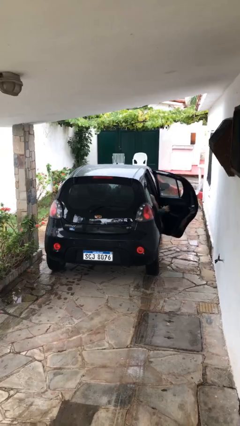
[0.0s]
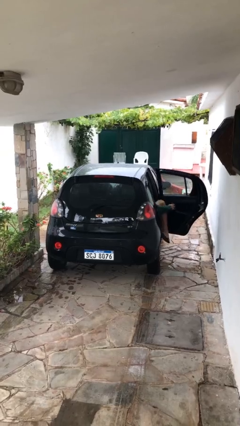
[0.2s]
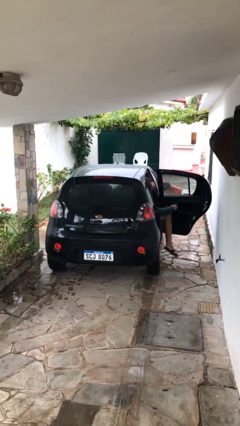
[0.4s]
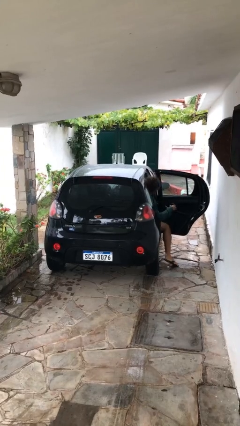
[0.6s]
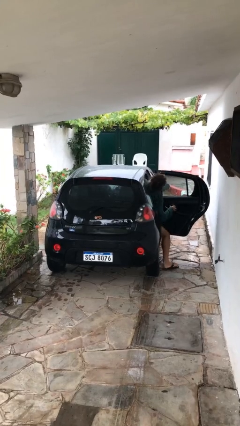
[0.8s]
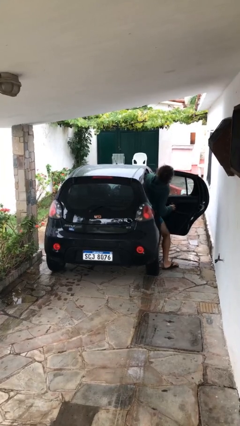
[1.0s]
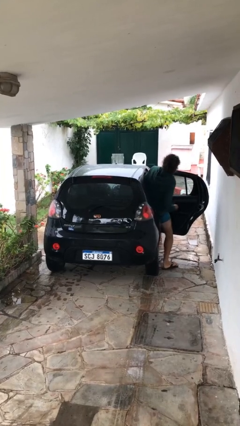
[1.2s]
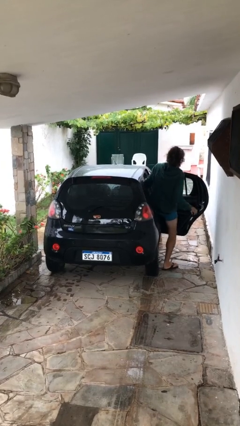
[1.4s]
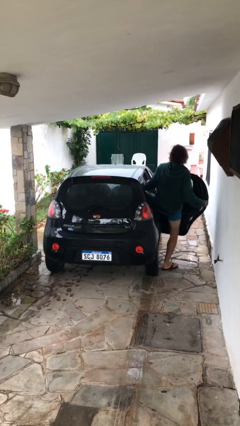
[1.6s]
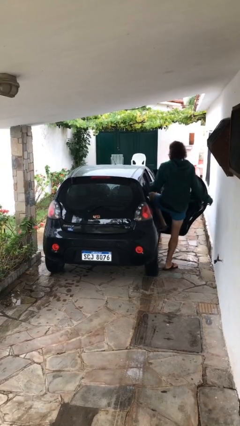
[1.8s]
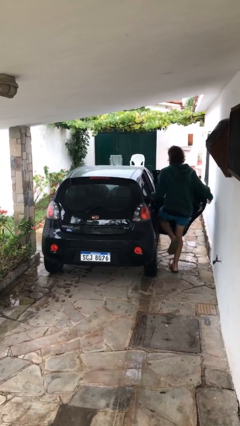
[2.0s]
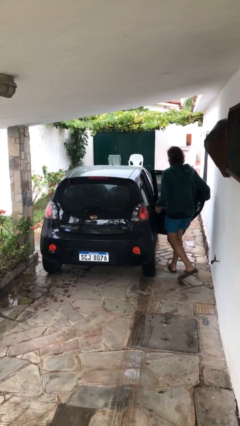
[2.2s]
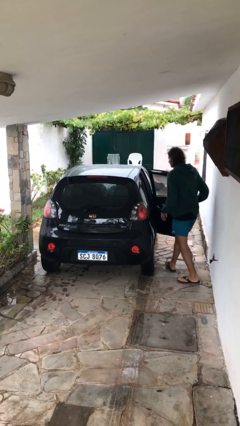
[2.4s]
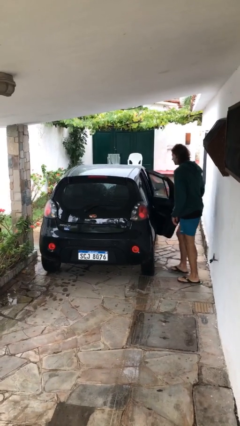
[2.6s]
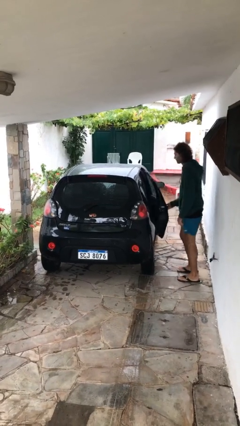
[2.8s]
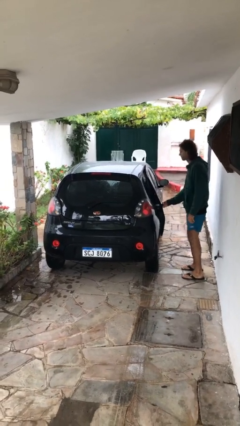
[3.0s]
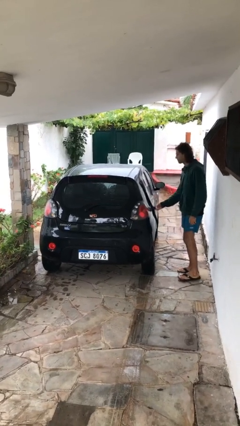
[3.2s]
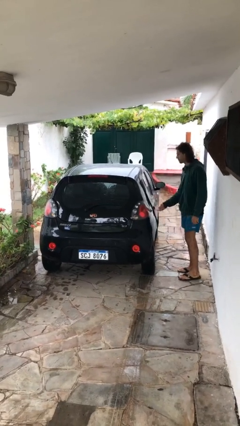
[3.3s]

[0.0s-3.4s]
car drops off person

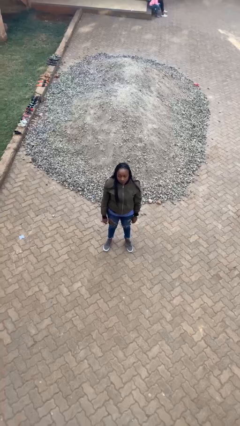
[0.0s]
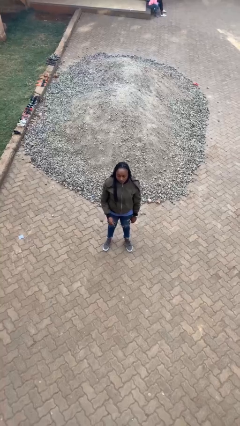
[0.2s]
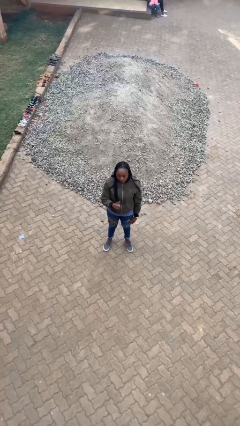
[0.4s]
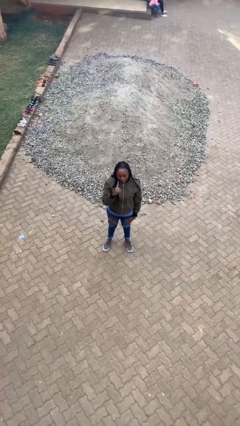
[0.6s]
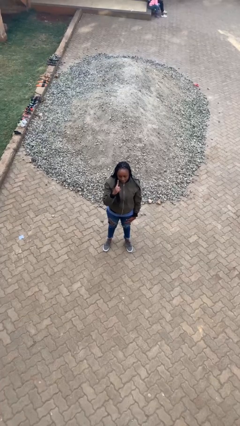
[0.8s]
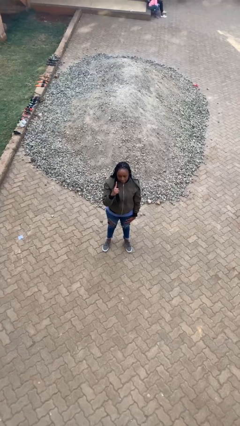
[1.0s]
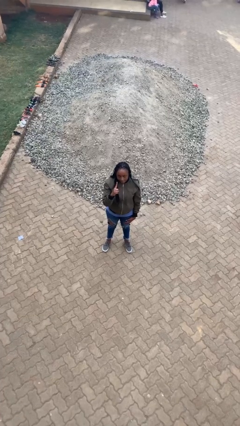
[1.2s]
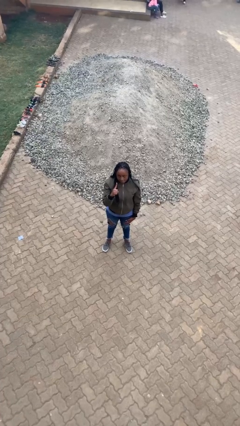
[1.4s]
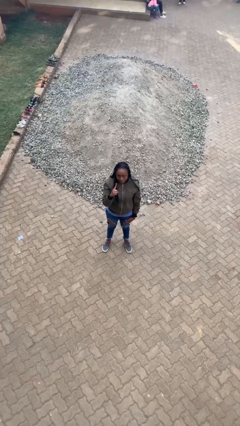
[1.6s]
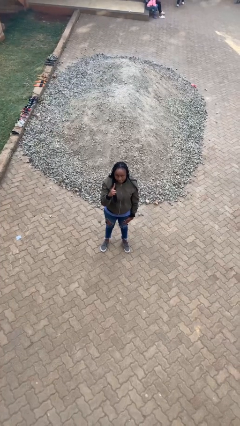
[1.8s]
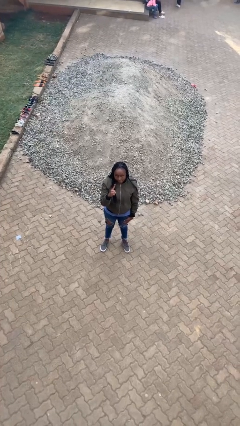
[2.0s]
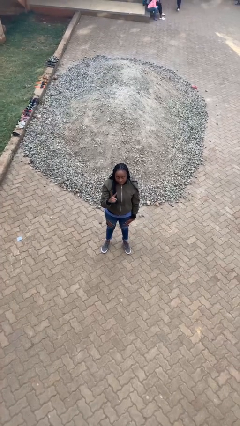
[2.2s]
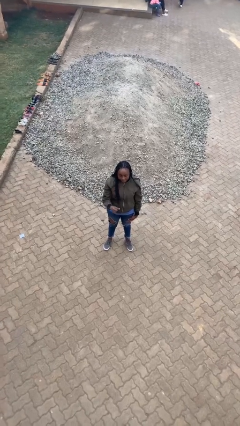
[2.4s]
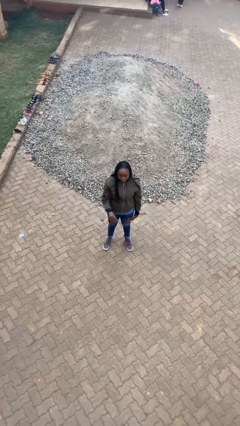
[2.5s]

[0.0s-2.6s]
person gestures number one

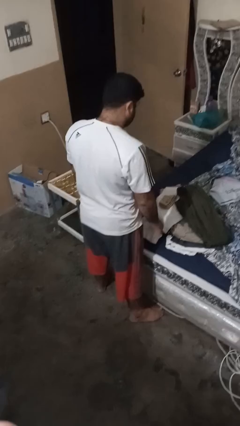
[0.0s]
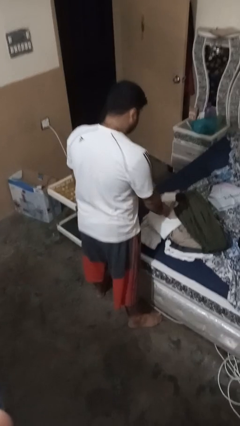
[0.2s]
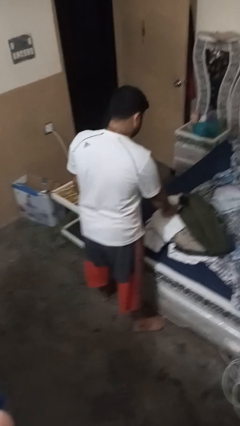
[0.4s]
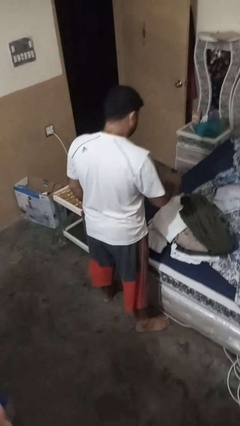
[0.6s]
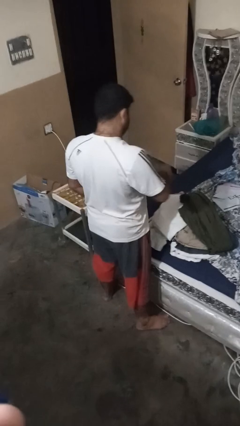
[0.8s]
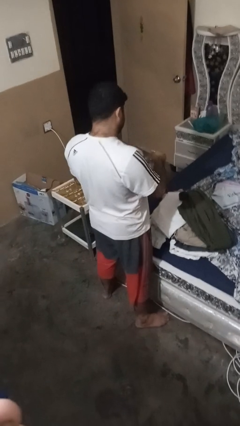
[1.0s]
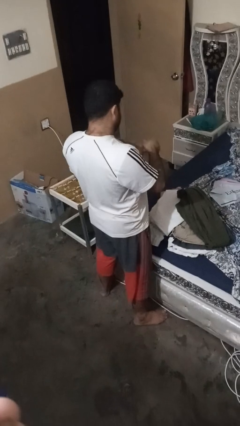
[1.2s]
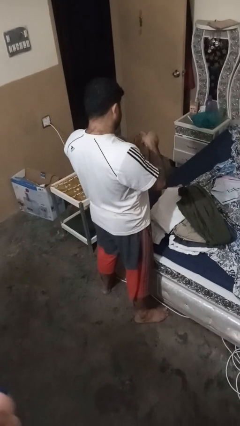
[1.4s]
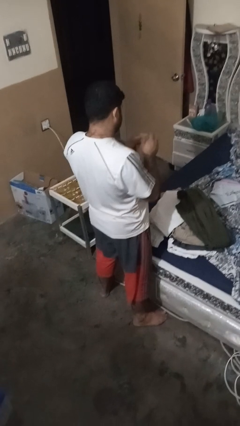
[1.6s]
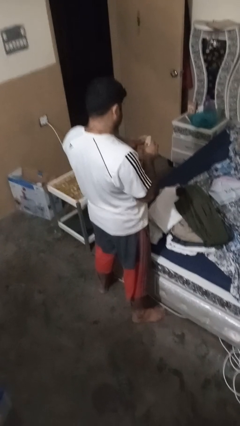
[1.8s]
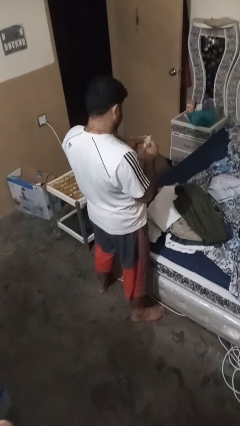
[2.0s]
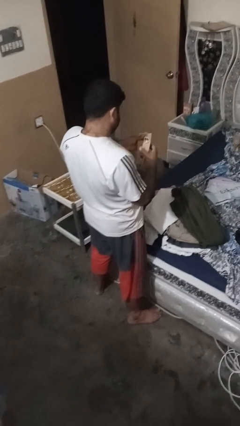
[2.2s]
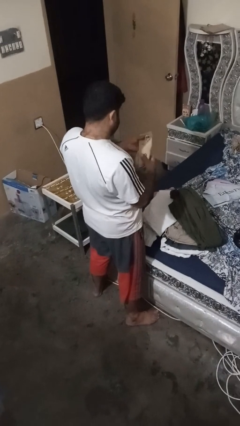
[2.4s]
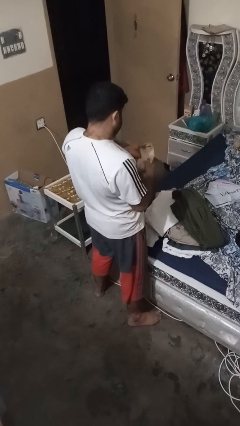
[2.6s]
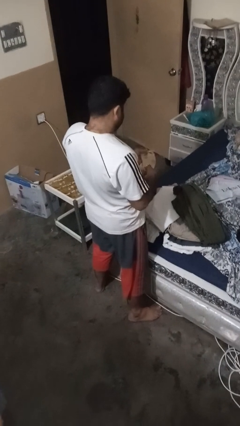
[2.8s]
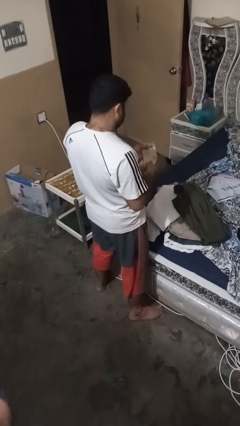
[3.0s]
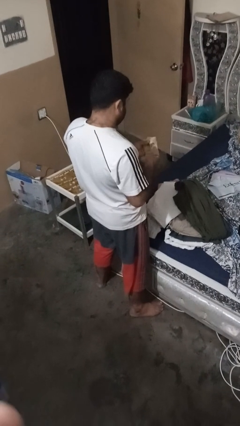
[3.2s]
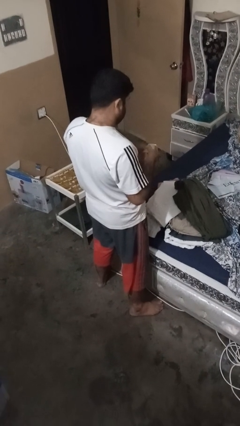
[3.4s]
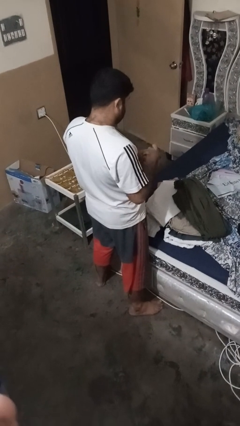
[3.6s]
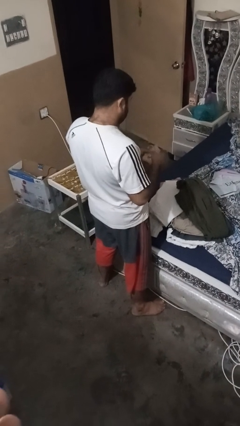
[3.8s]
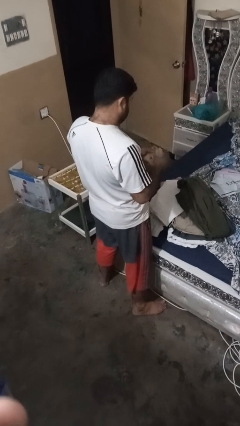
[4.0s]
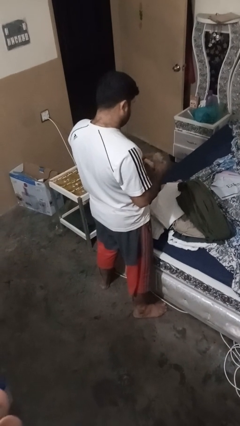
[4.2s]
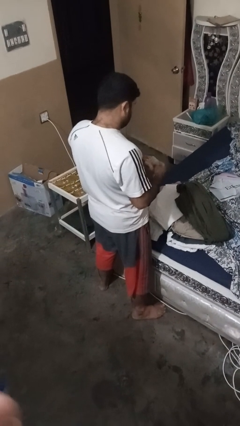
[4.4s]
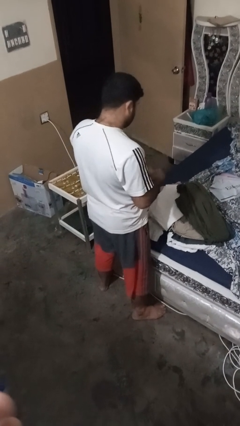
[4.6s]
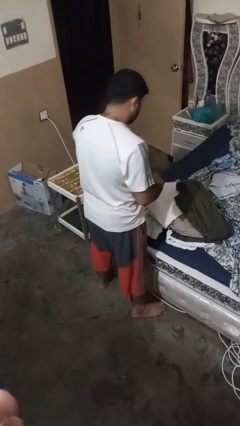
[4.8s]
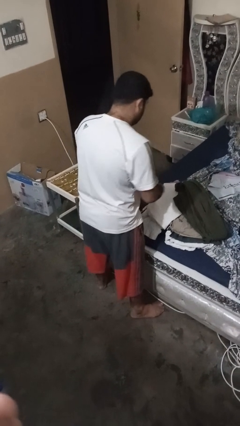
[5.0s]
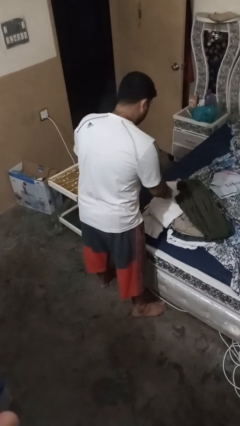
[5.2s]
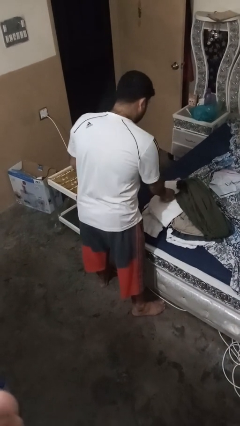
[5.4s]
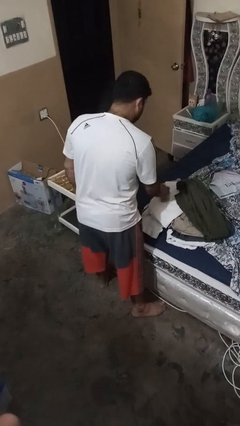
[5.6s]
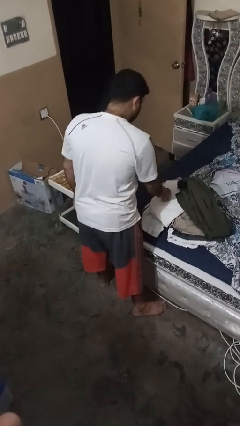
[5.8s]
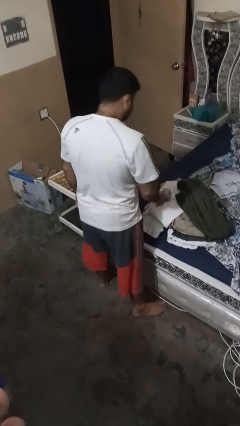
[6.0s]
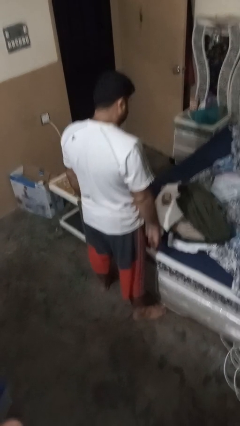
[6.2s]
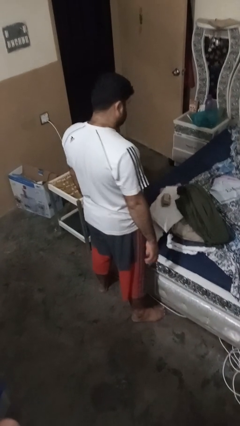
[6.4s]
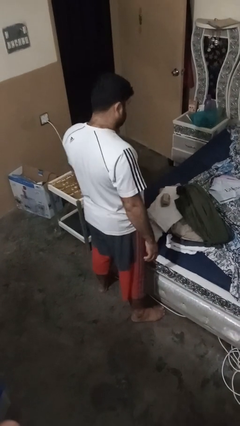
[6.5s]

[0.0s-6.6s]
person folds socks

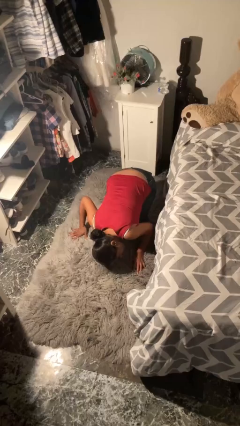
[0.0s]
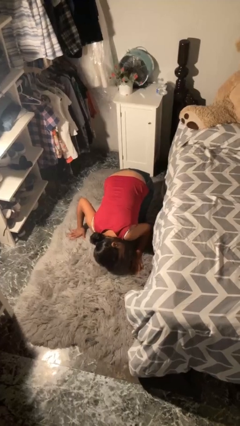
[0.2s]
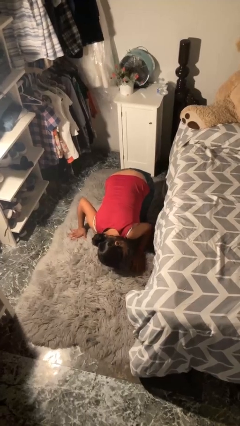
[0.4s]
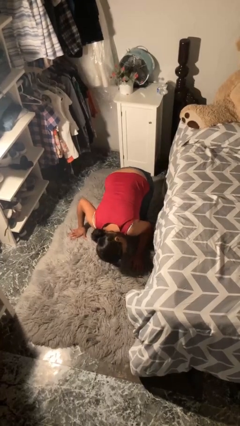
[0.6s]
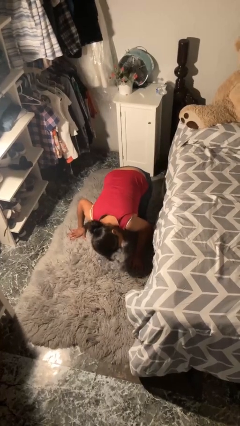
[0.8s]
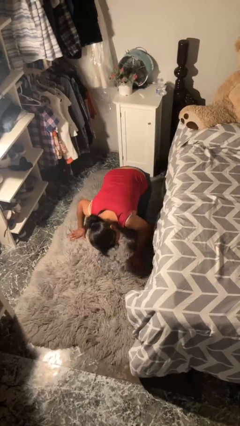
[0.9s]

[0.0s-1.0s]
person searches under bed

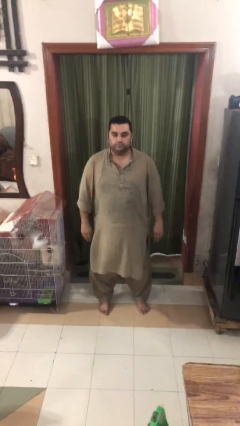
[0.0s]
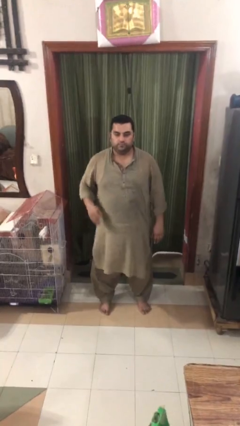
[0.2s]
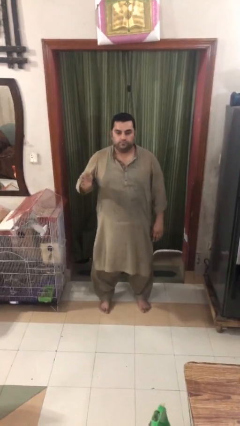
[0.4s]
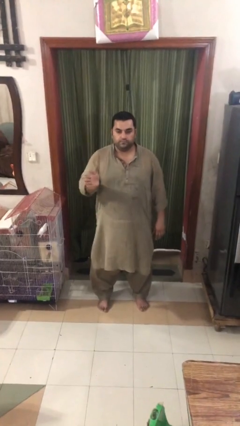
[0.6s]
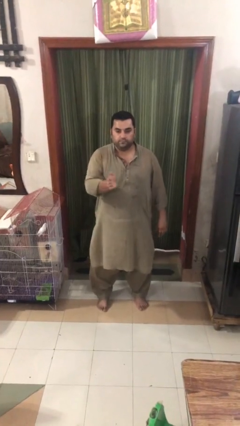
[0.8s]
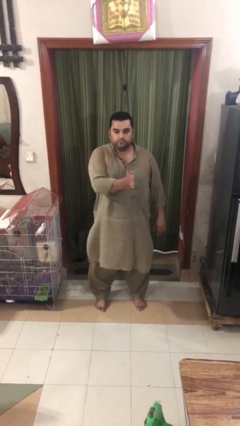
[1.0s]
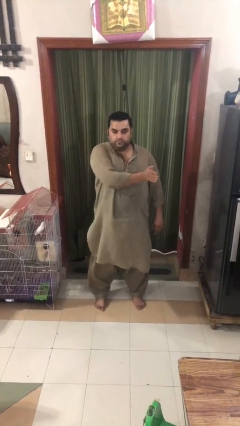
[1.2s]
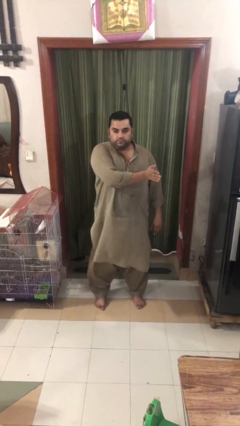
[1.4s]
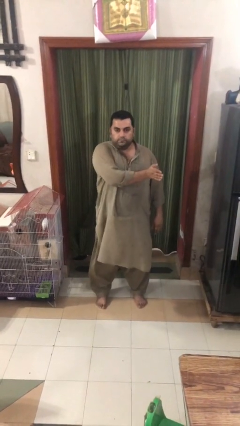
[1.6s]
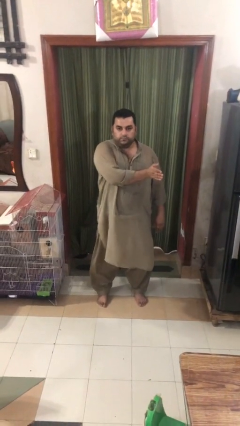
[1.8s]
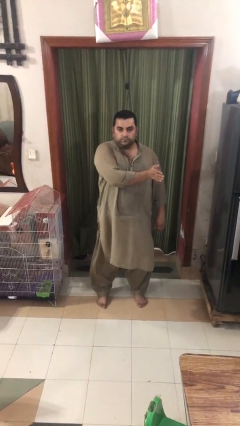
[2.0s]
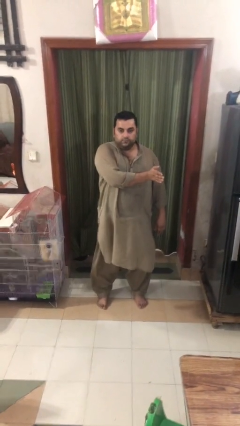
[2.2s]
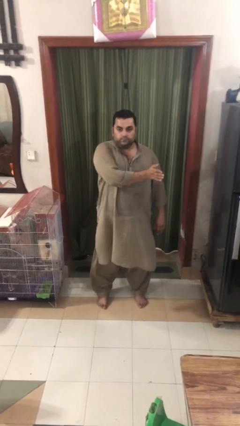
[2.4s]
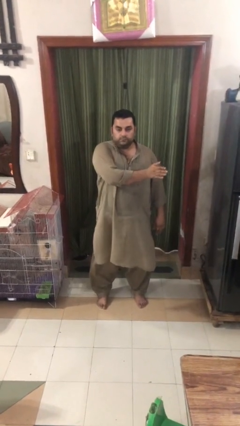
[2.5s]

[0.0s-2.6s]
person gestures swipe left

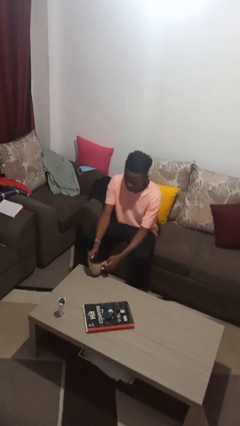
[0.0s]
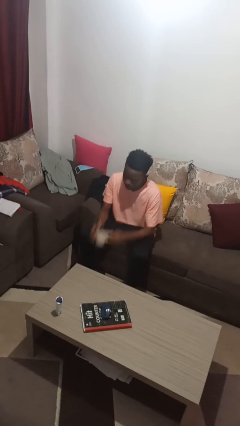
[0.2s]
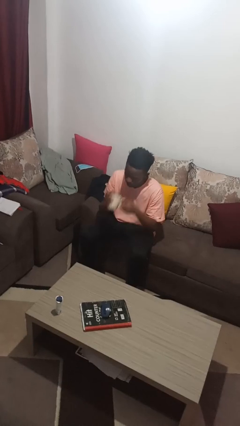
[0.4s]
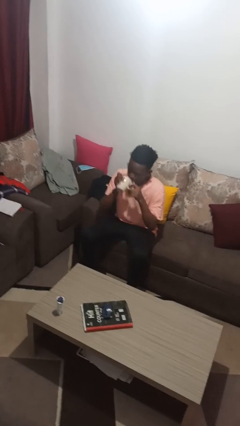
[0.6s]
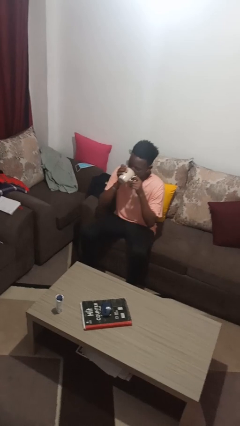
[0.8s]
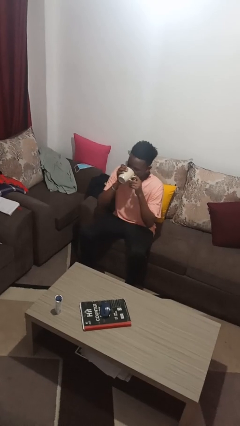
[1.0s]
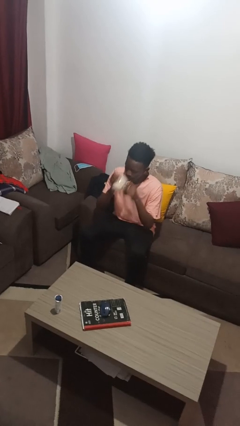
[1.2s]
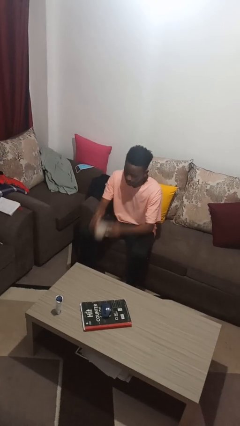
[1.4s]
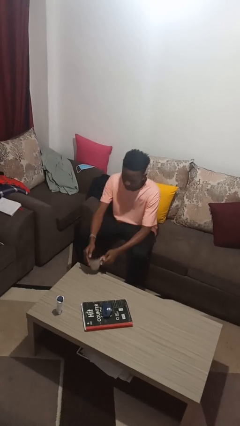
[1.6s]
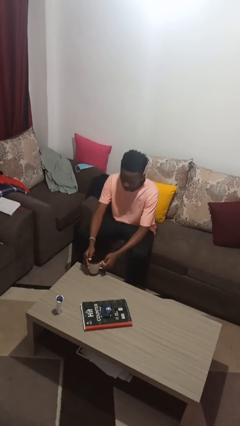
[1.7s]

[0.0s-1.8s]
person drinks from mug
